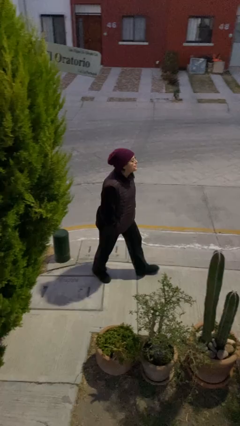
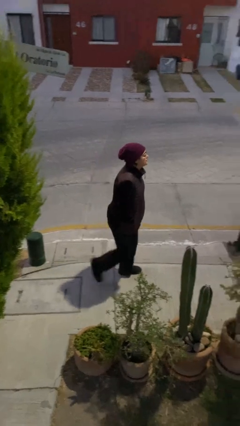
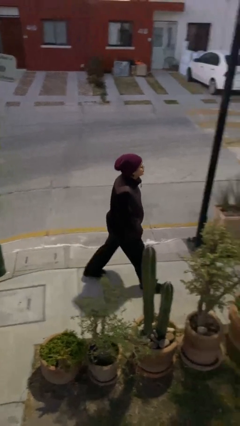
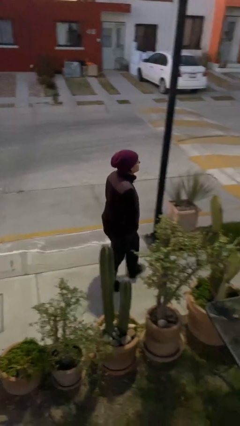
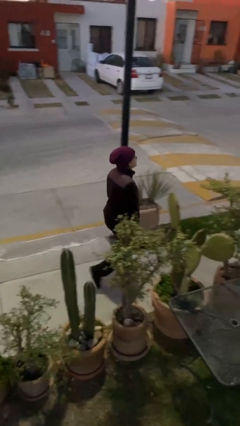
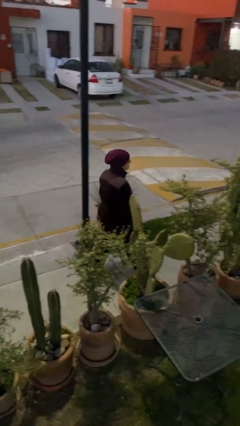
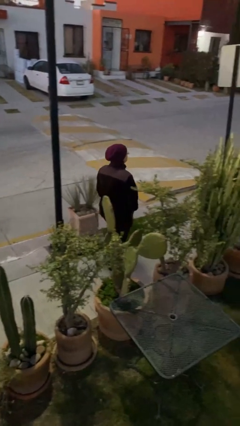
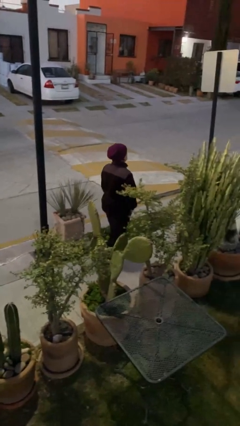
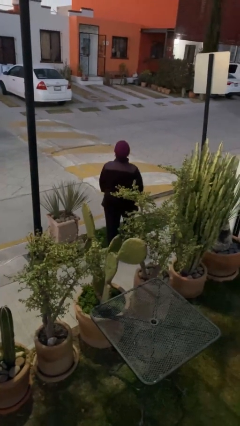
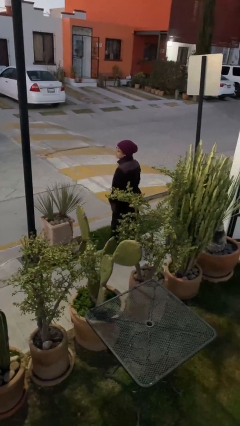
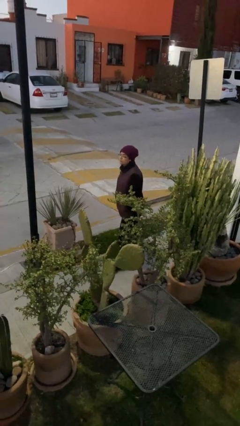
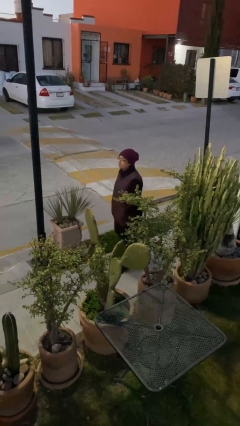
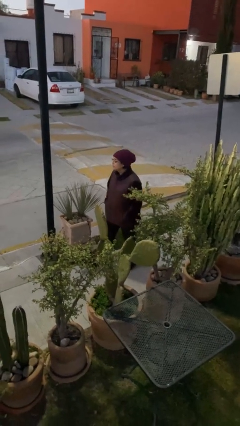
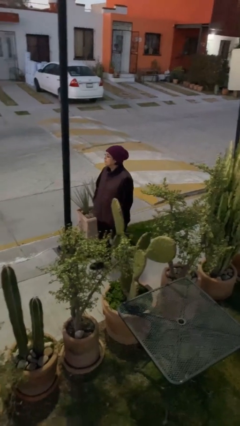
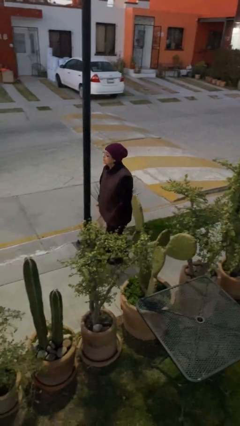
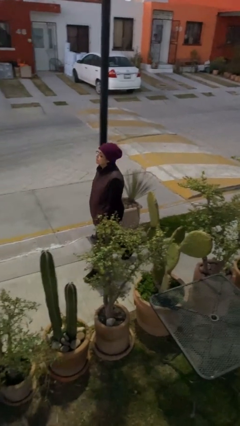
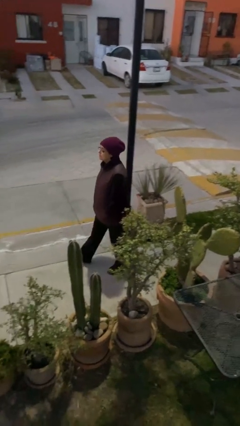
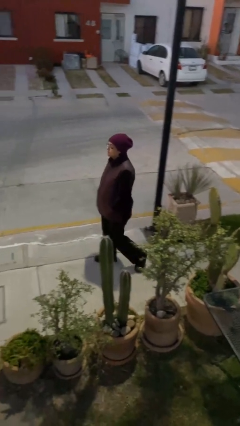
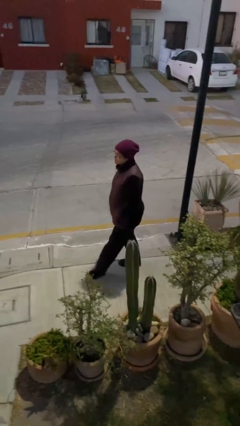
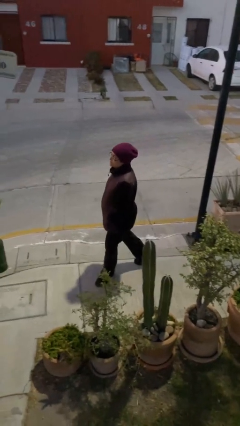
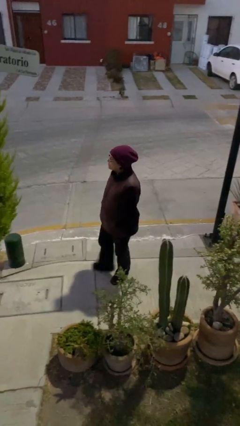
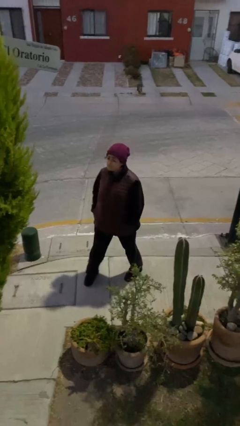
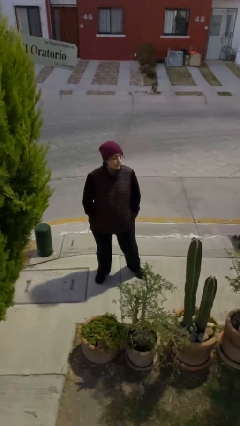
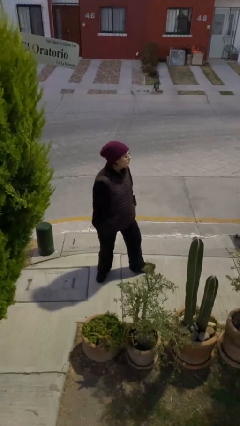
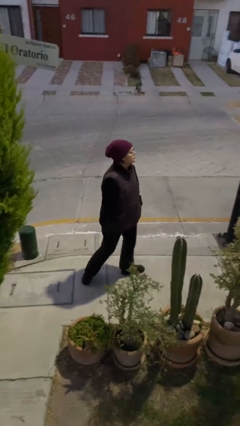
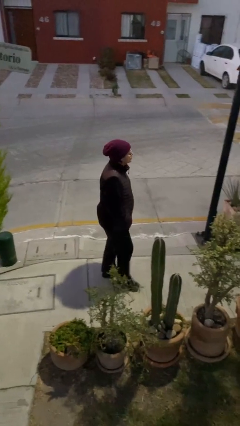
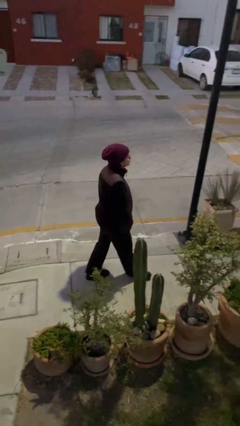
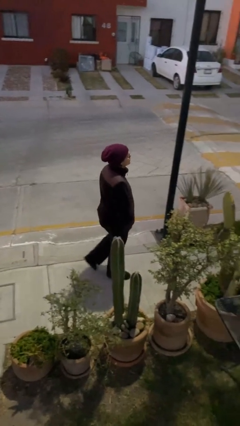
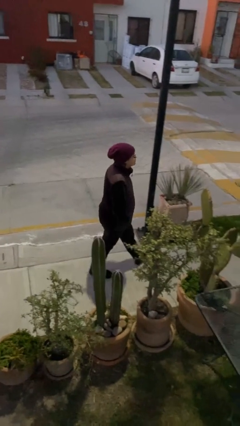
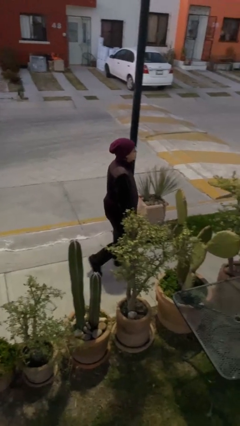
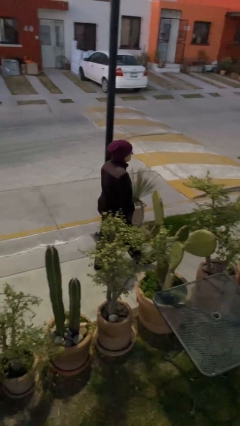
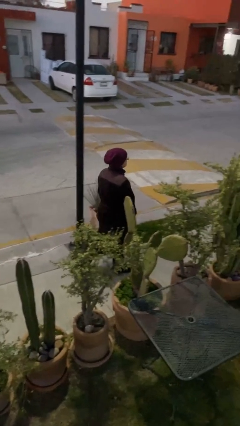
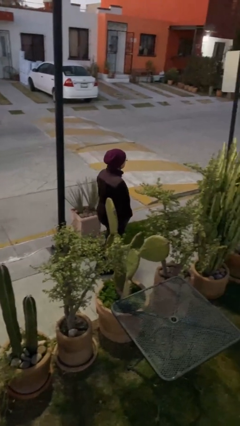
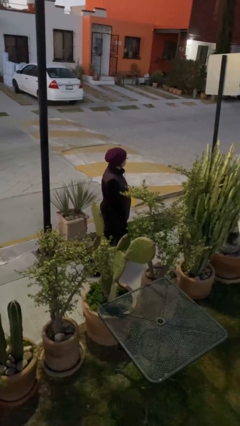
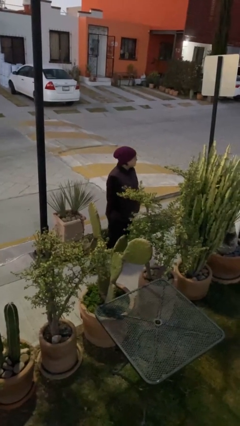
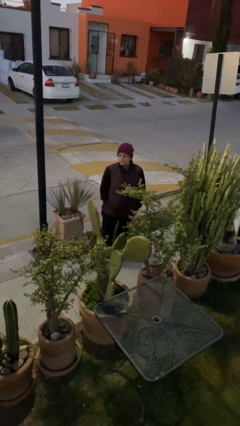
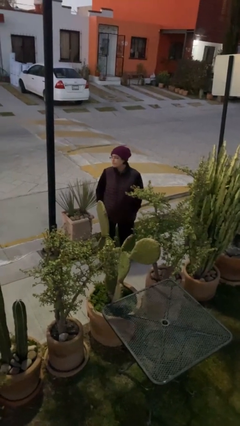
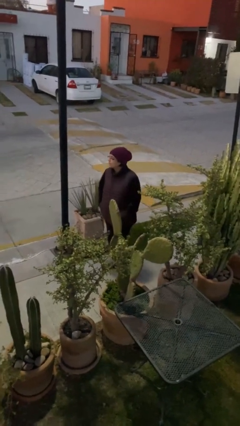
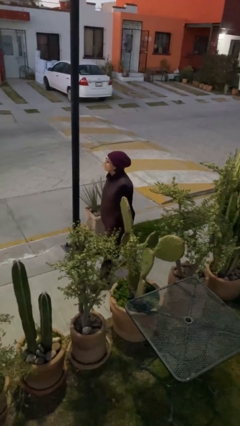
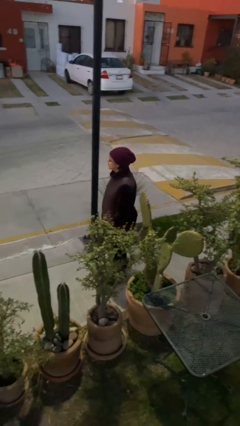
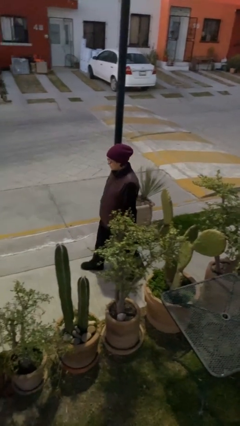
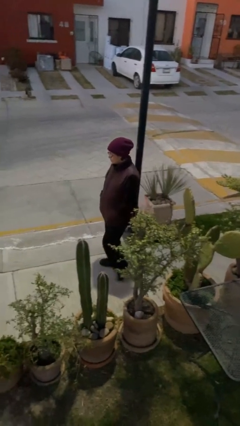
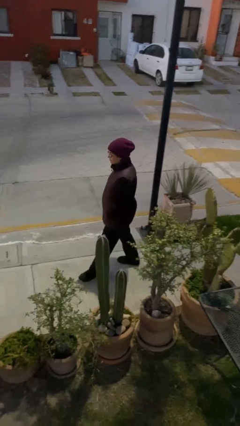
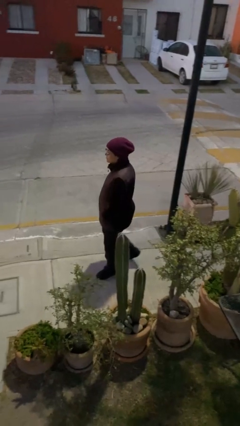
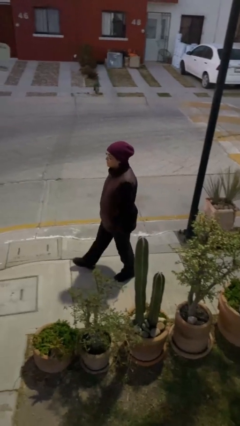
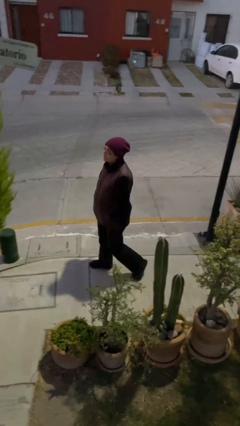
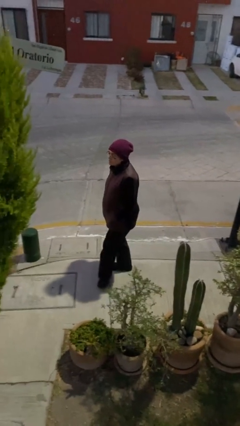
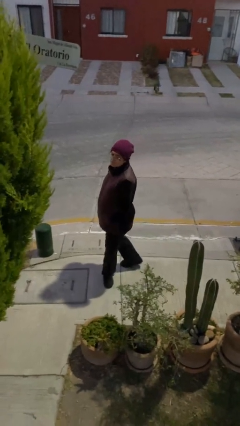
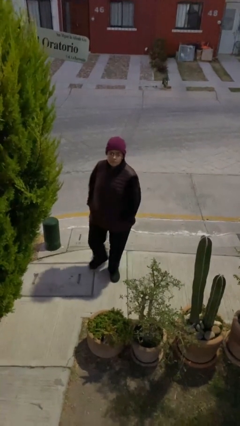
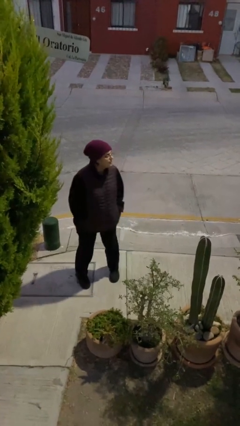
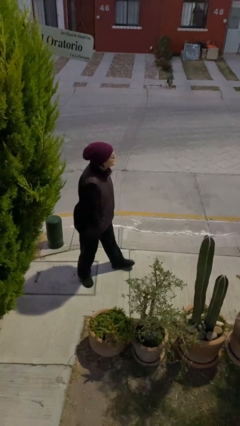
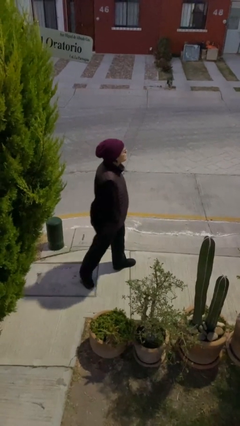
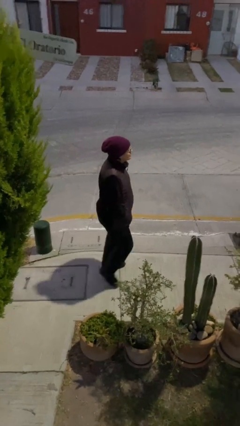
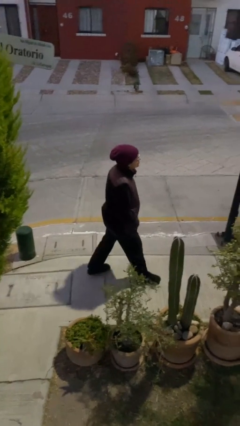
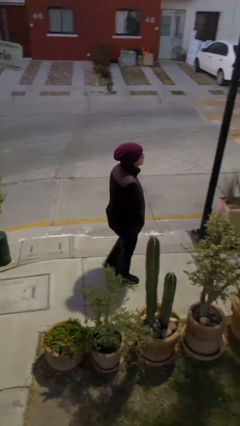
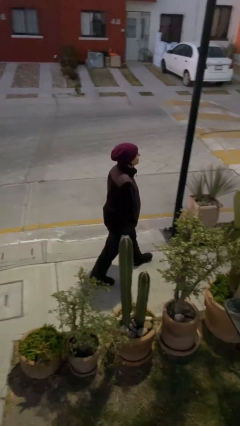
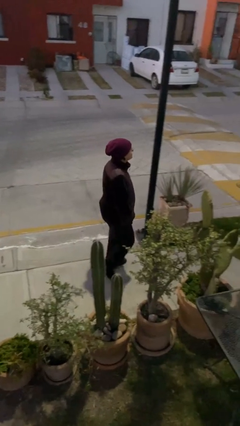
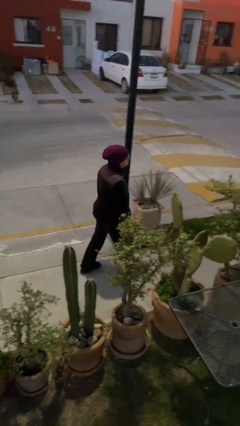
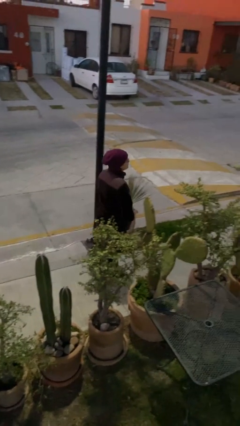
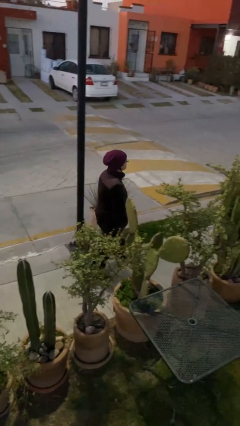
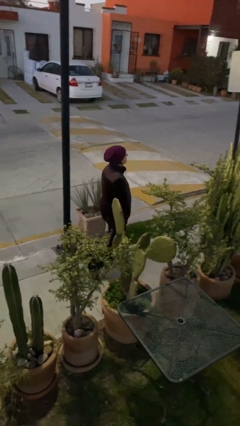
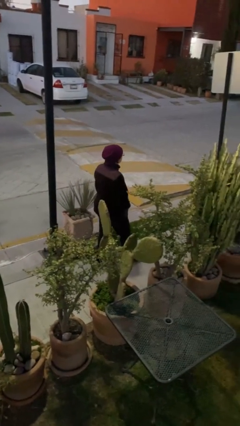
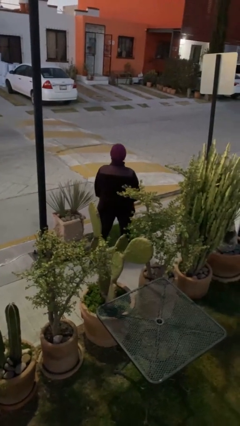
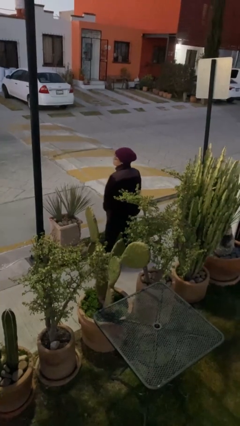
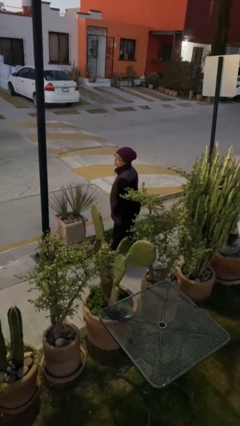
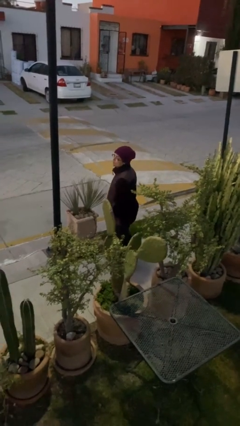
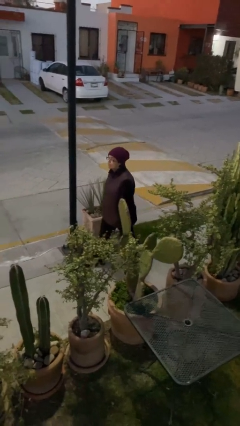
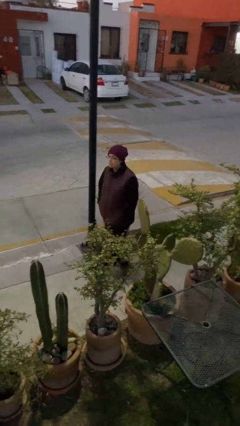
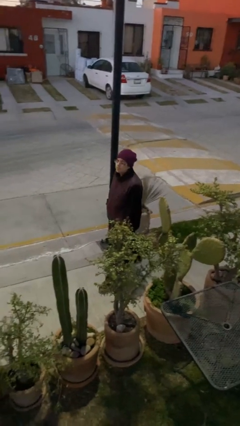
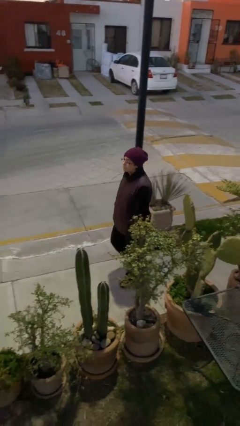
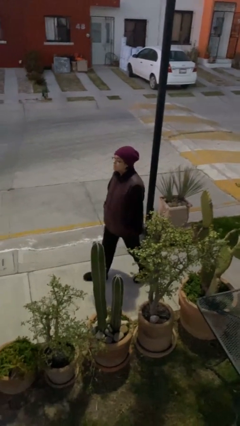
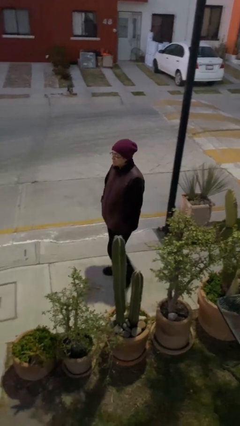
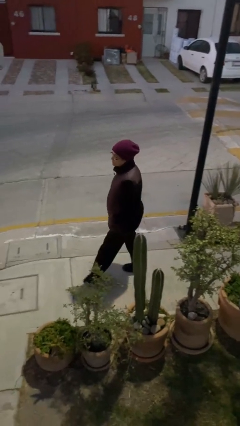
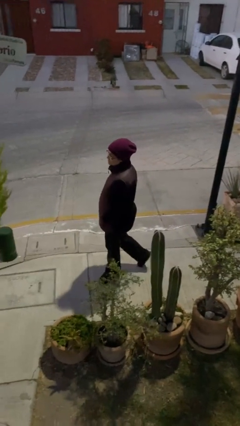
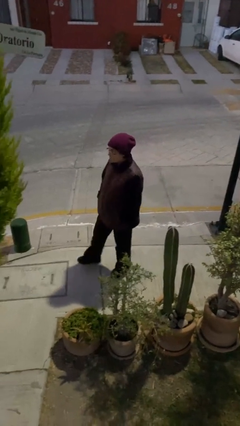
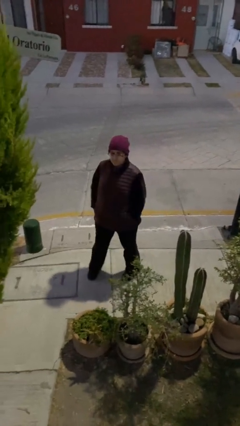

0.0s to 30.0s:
person walks

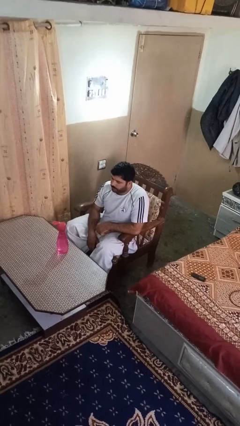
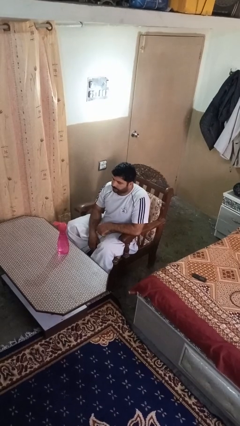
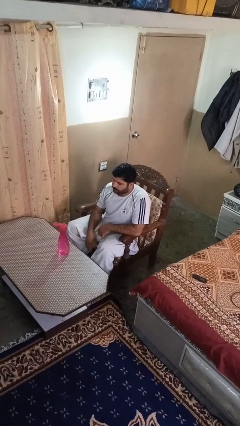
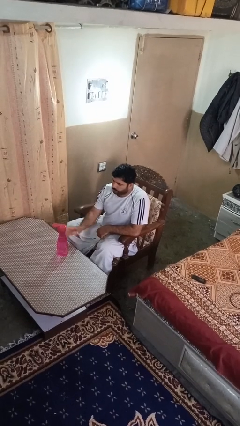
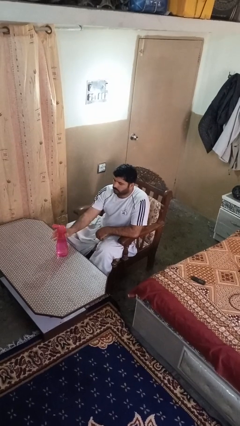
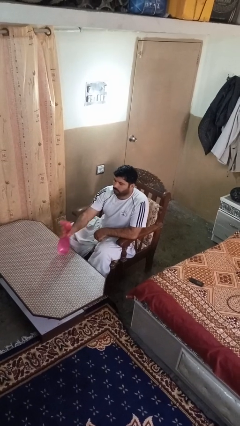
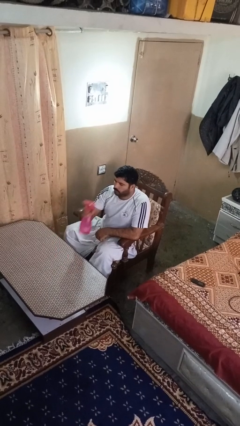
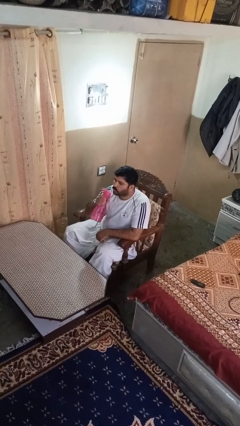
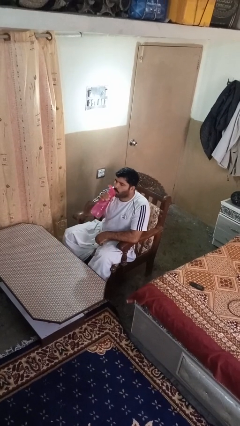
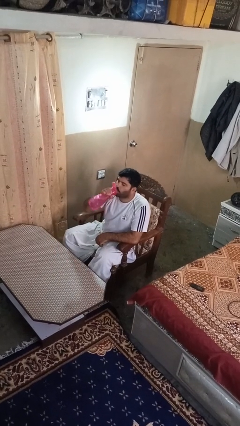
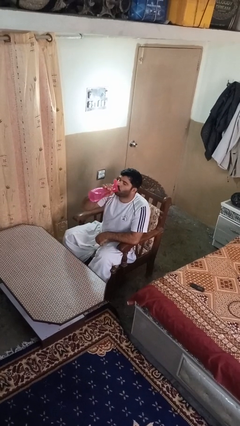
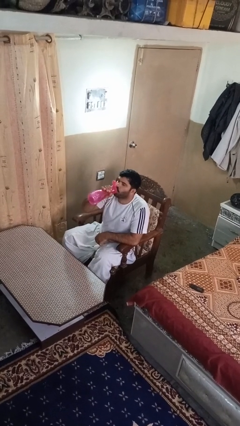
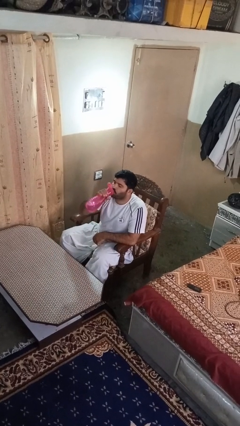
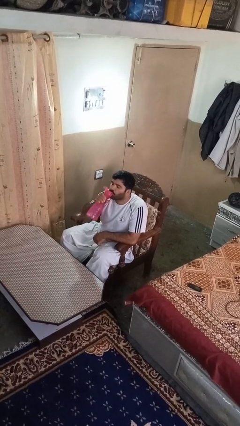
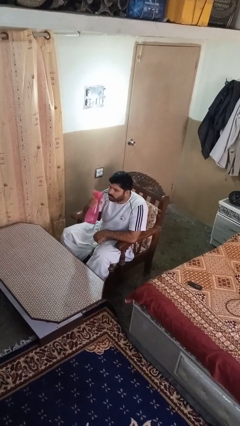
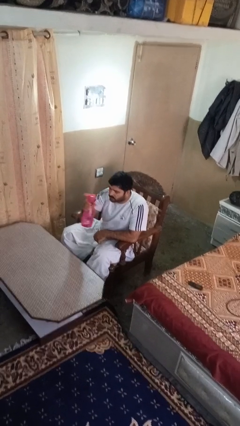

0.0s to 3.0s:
person drinks from bottle

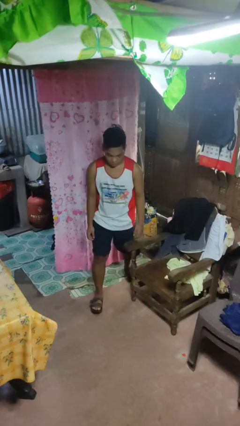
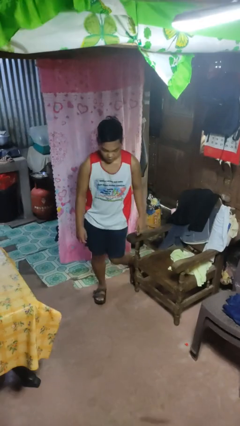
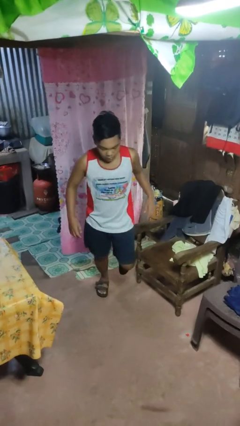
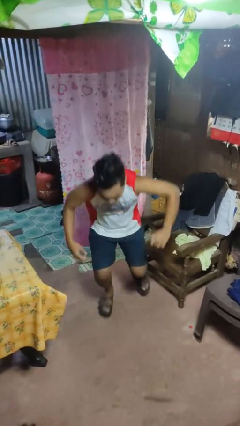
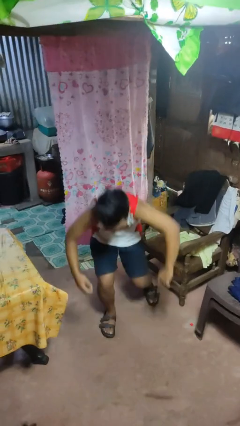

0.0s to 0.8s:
person trips on object on floor
